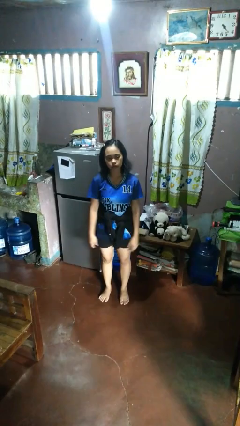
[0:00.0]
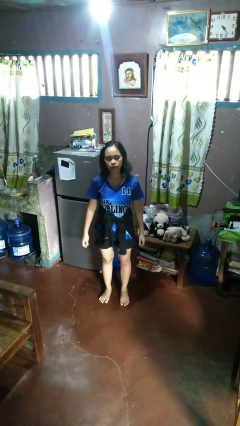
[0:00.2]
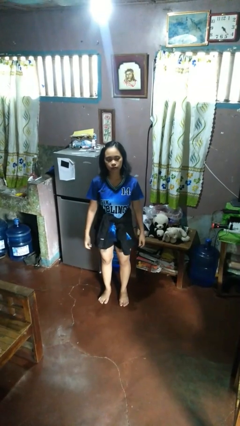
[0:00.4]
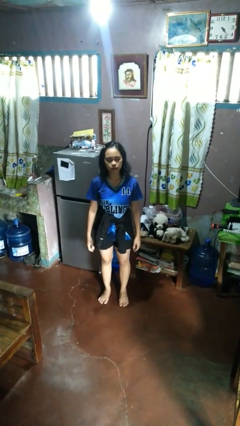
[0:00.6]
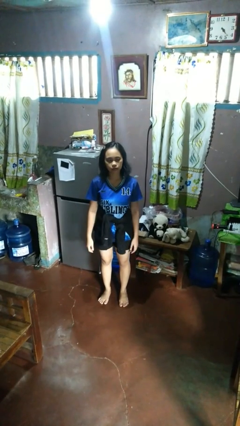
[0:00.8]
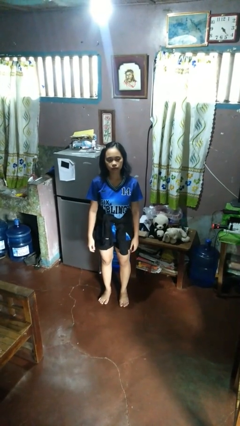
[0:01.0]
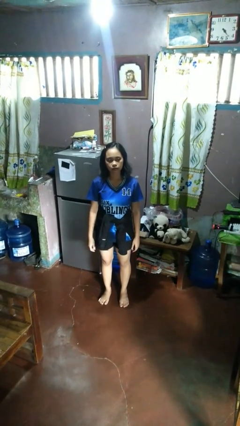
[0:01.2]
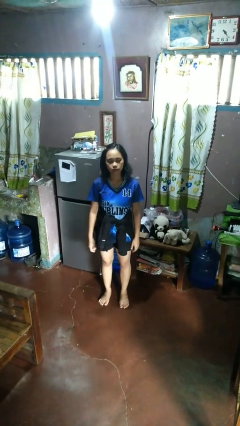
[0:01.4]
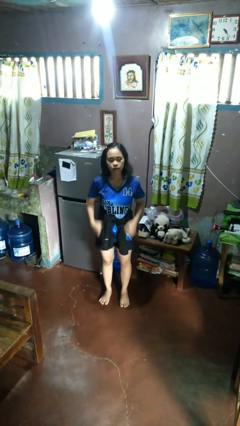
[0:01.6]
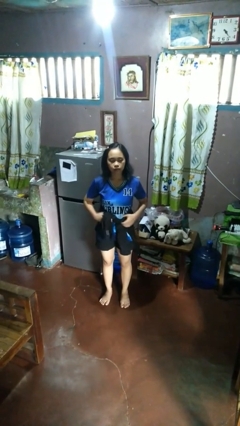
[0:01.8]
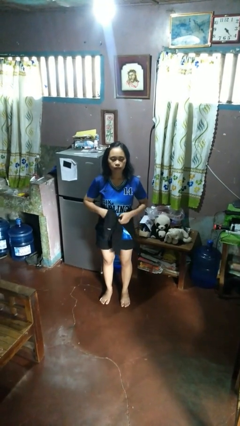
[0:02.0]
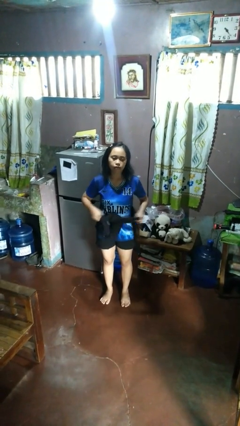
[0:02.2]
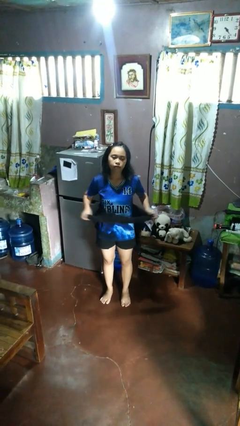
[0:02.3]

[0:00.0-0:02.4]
person unties jacket around waist

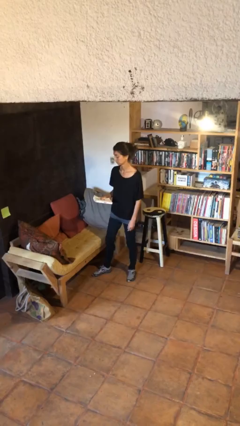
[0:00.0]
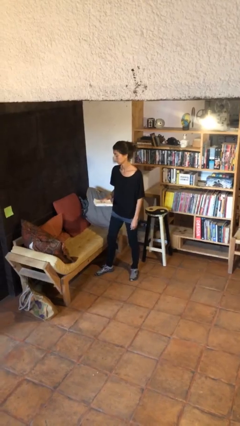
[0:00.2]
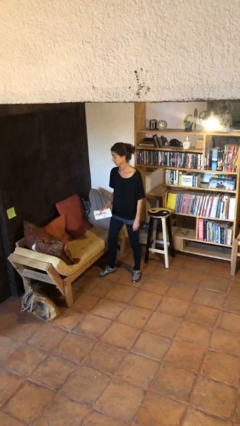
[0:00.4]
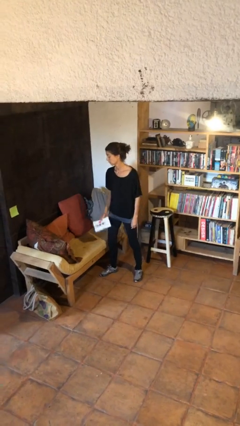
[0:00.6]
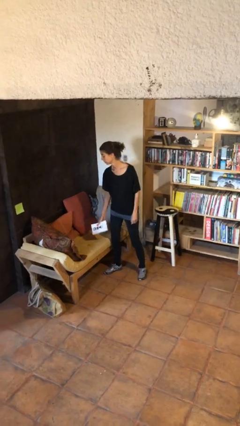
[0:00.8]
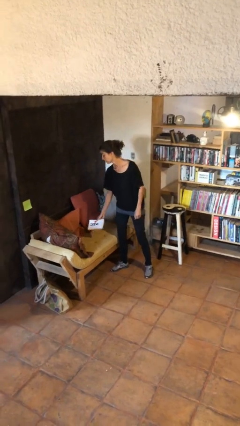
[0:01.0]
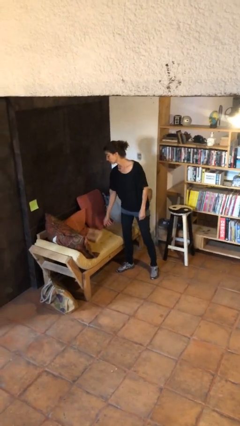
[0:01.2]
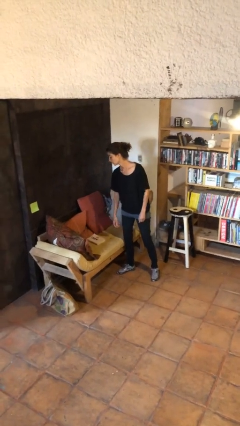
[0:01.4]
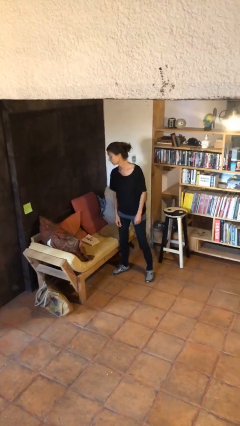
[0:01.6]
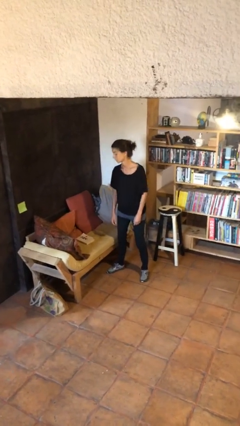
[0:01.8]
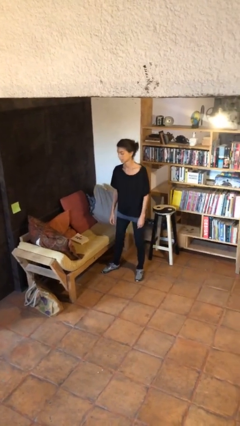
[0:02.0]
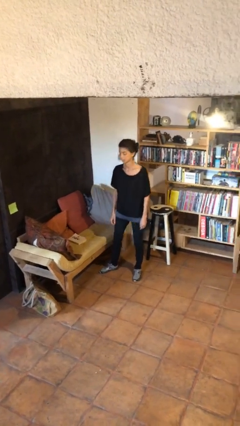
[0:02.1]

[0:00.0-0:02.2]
person puts down object on couch

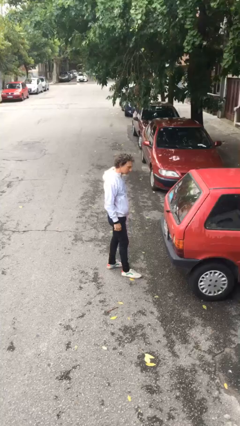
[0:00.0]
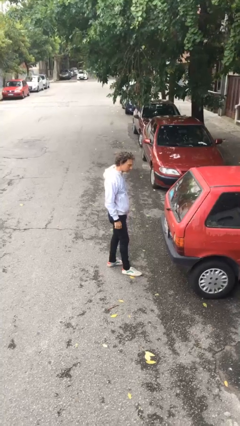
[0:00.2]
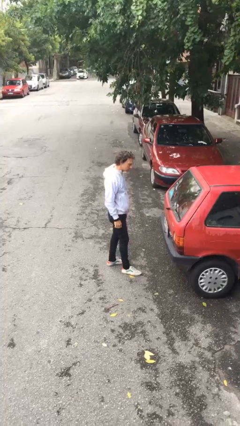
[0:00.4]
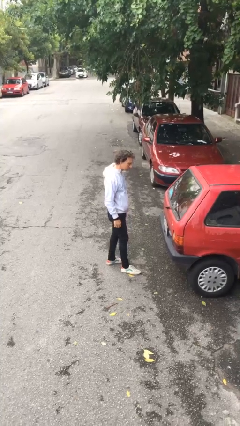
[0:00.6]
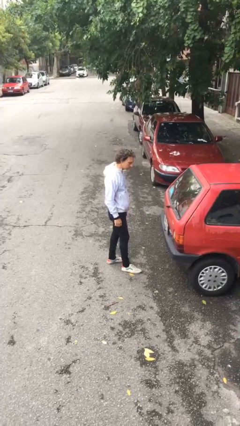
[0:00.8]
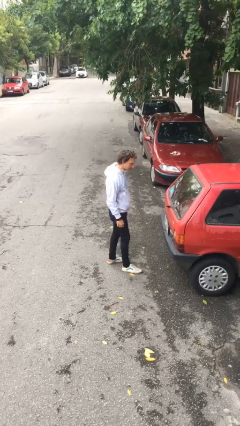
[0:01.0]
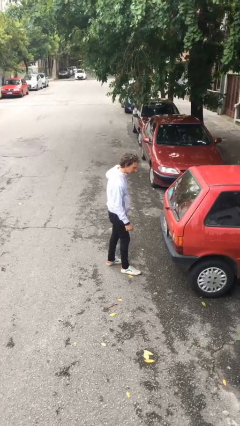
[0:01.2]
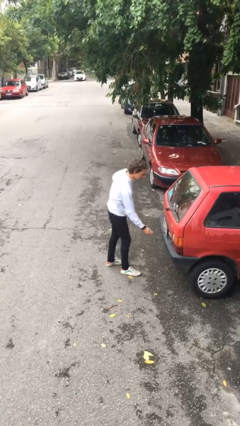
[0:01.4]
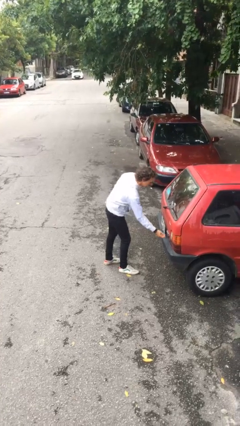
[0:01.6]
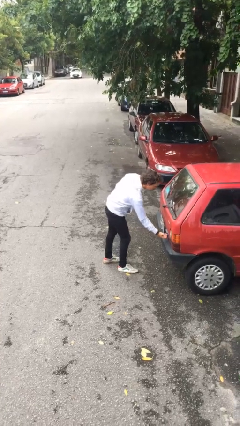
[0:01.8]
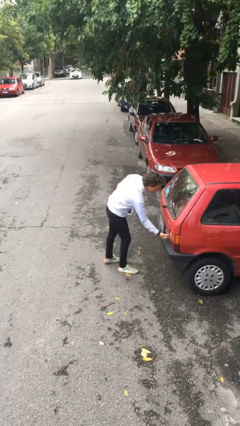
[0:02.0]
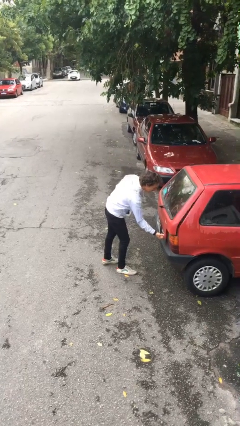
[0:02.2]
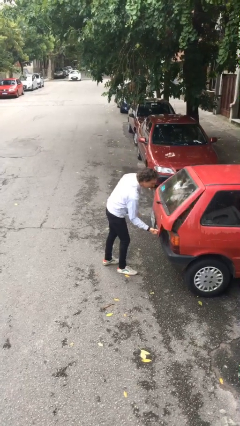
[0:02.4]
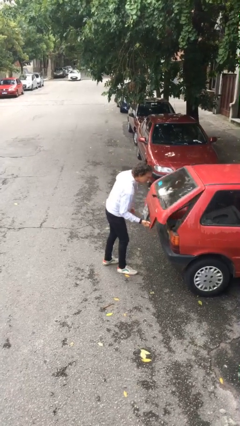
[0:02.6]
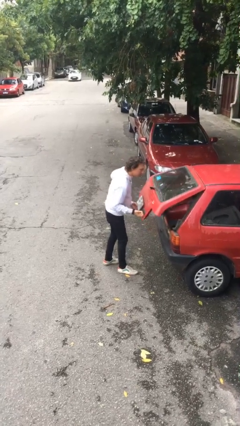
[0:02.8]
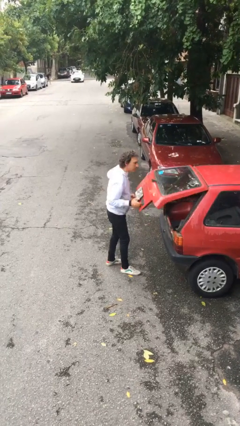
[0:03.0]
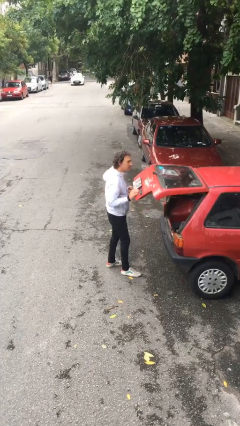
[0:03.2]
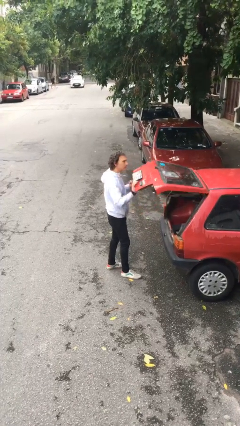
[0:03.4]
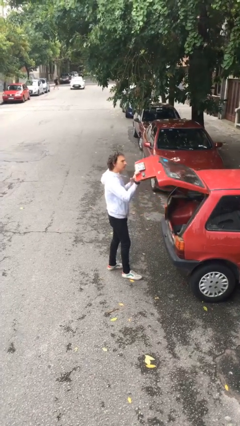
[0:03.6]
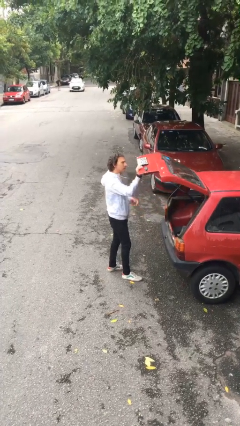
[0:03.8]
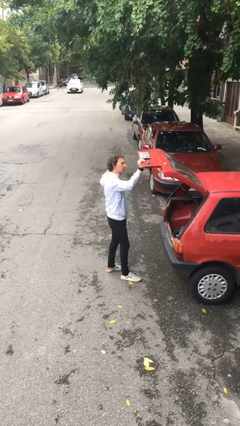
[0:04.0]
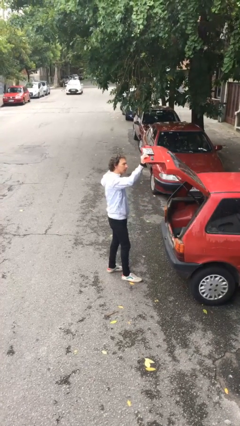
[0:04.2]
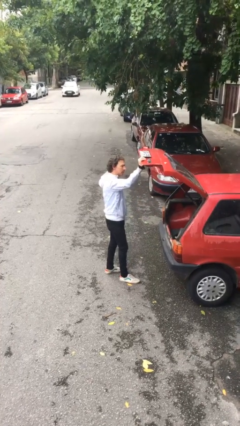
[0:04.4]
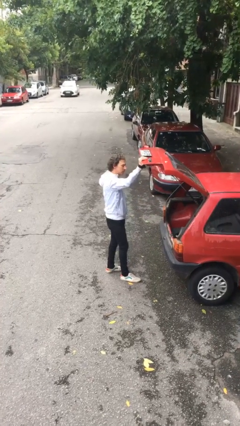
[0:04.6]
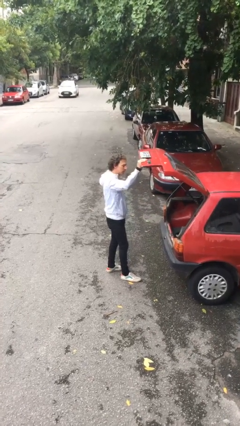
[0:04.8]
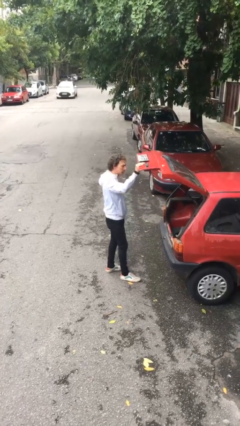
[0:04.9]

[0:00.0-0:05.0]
person opens car trunk

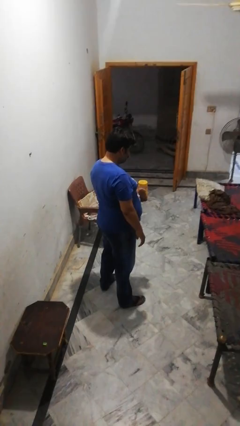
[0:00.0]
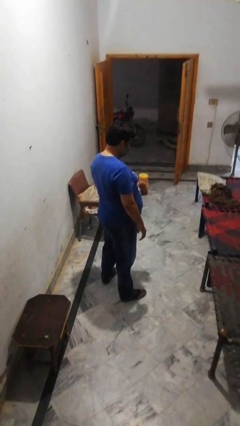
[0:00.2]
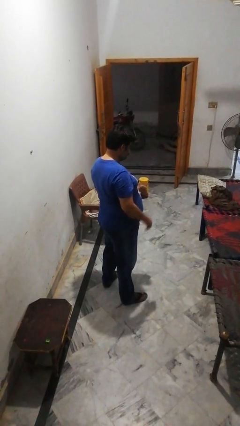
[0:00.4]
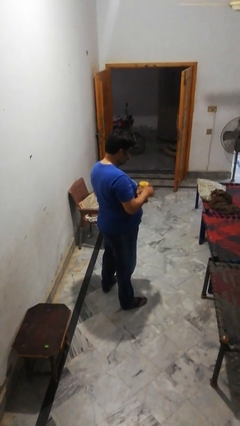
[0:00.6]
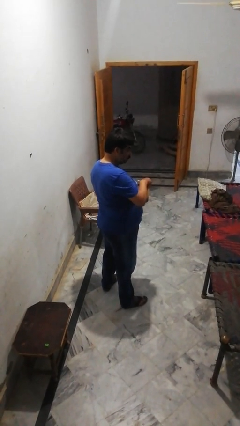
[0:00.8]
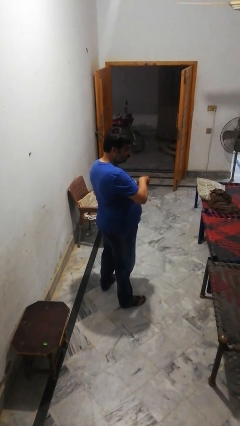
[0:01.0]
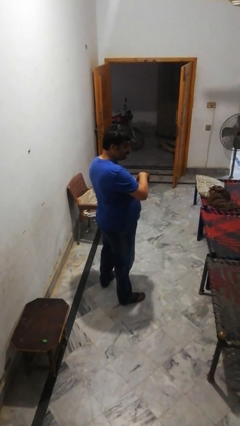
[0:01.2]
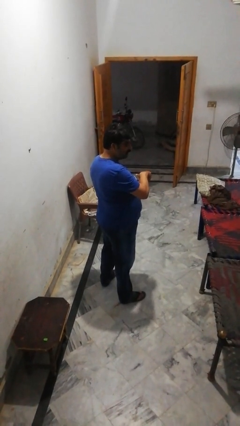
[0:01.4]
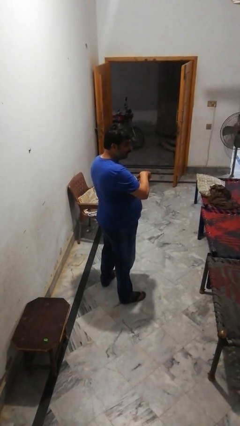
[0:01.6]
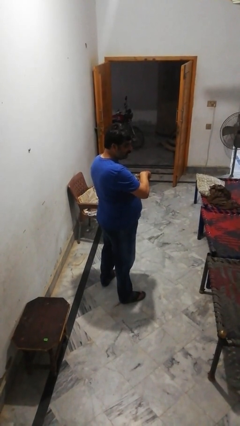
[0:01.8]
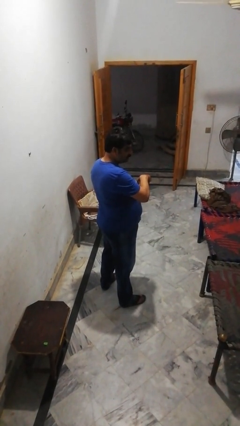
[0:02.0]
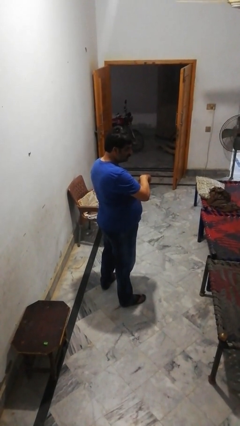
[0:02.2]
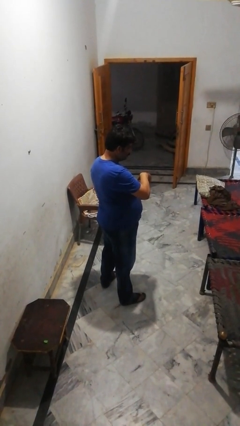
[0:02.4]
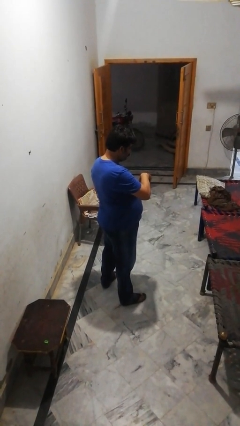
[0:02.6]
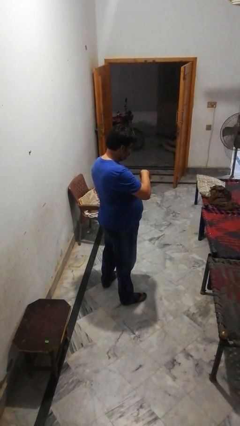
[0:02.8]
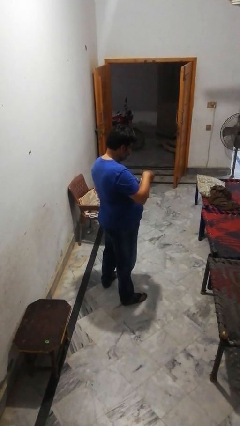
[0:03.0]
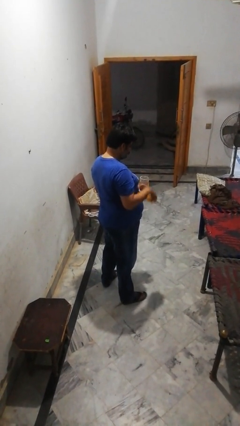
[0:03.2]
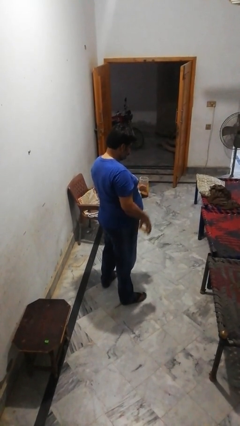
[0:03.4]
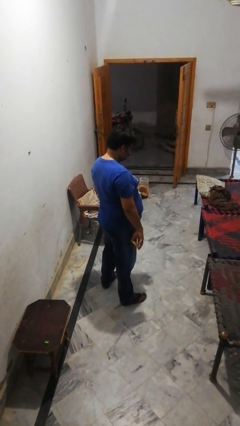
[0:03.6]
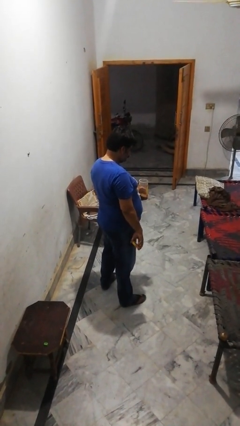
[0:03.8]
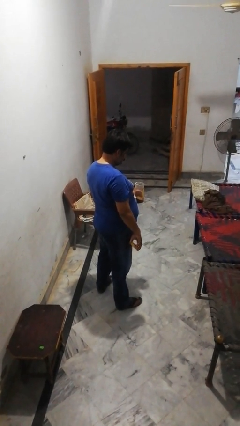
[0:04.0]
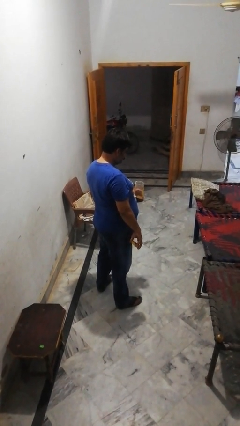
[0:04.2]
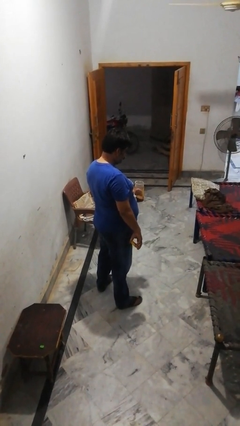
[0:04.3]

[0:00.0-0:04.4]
person opens jar

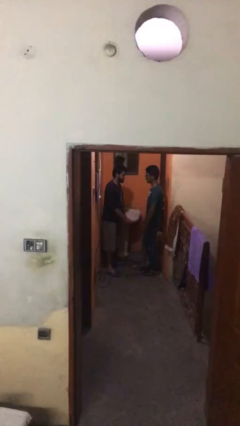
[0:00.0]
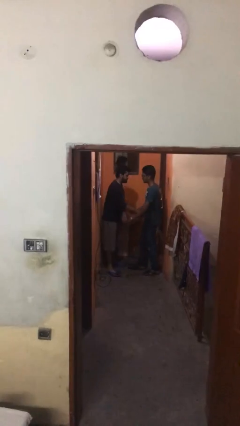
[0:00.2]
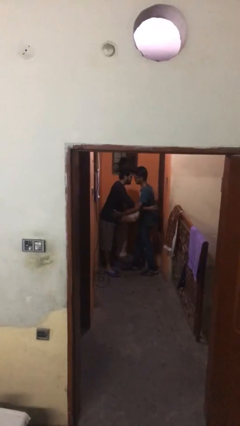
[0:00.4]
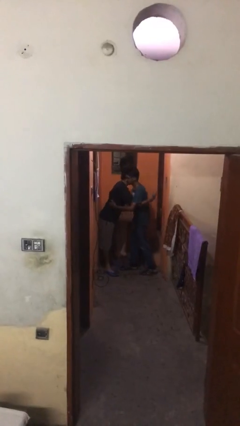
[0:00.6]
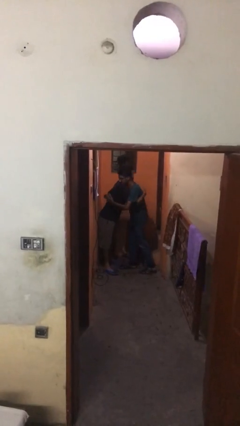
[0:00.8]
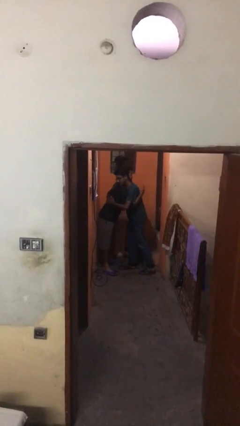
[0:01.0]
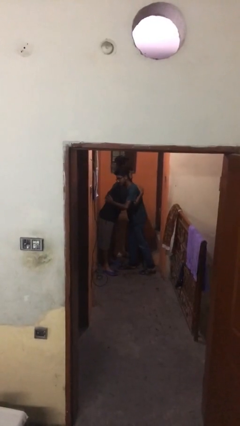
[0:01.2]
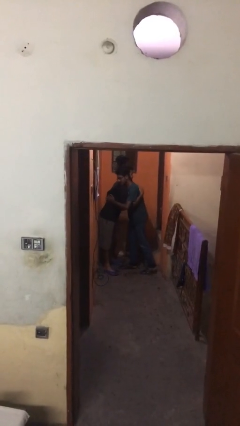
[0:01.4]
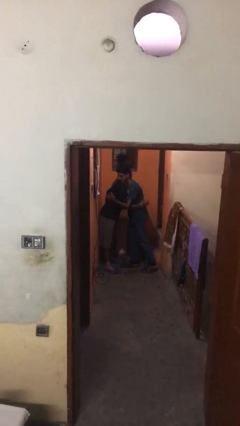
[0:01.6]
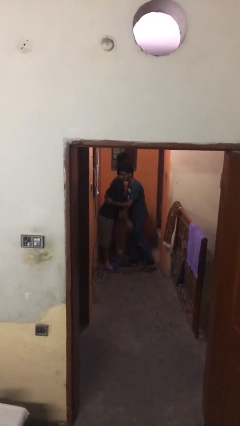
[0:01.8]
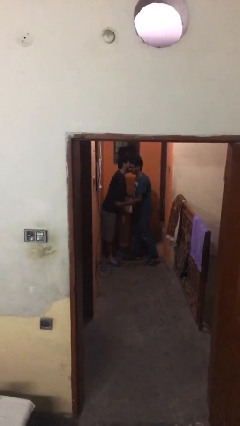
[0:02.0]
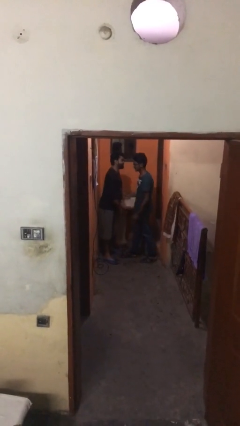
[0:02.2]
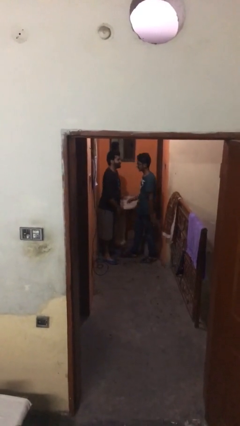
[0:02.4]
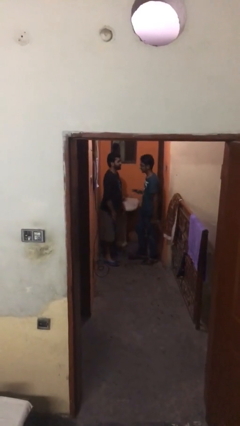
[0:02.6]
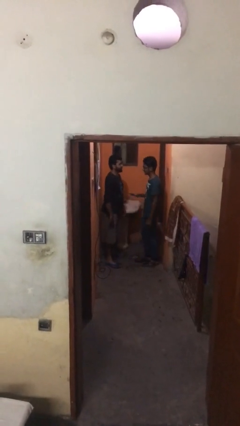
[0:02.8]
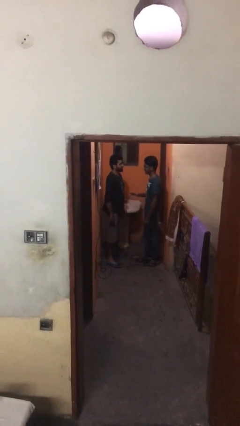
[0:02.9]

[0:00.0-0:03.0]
person embraces person

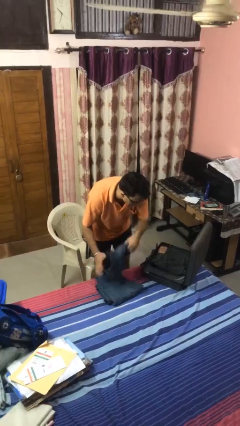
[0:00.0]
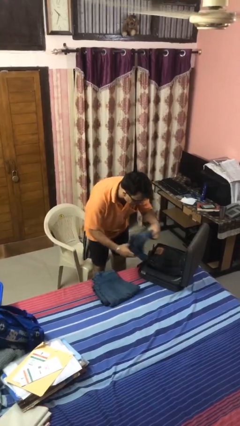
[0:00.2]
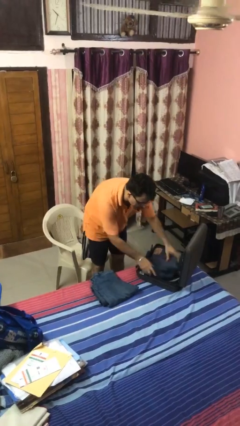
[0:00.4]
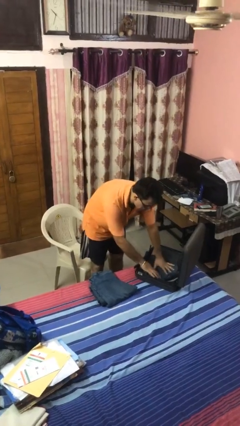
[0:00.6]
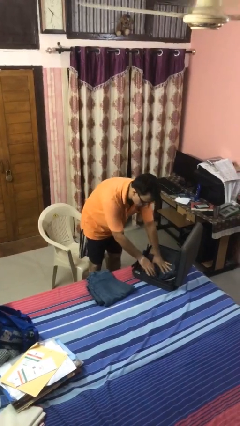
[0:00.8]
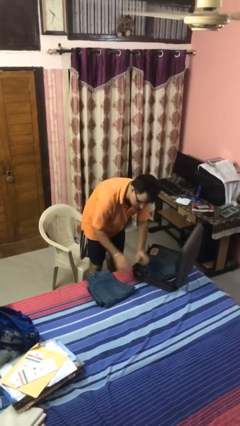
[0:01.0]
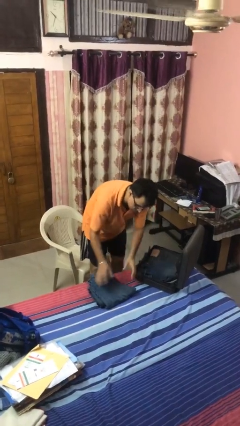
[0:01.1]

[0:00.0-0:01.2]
person loads clothes into suitcase
